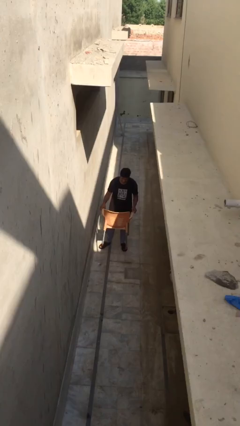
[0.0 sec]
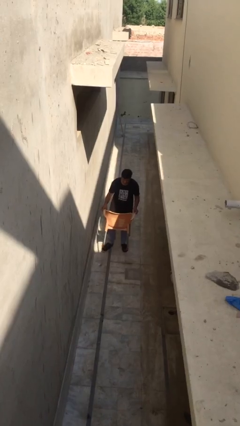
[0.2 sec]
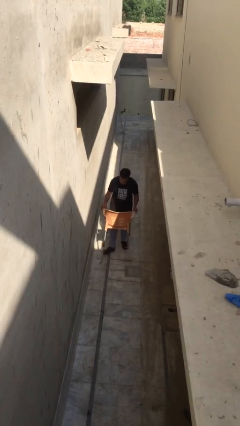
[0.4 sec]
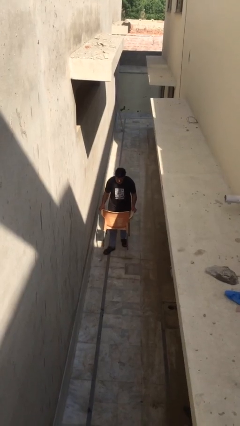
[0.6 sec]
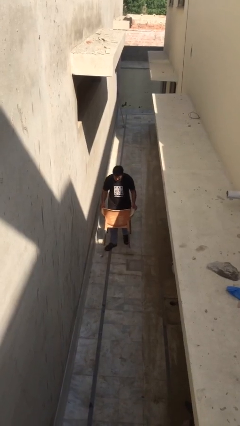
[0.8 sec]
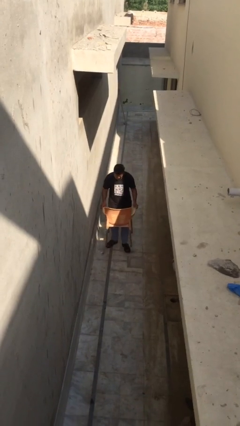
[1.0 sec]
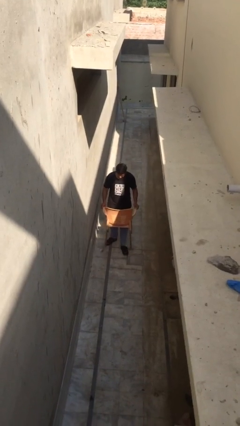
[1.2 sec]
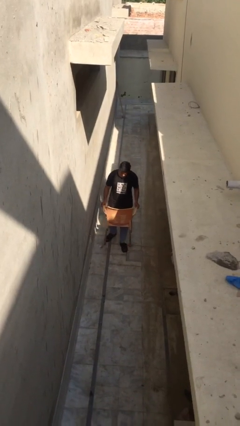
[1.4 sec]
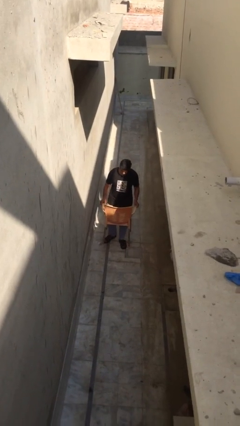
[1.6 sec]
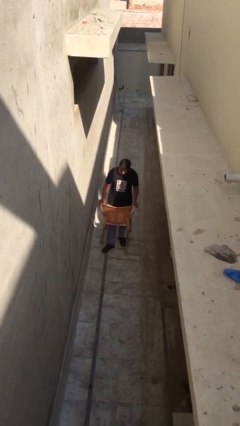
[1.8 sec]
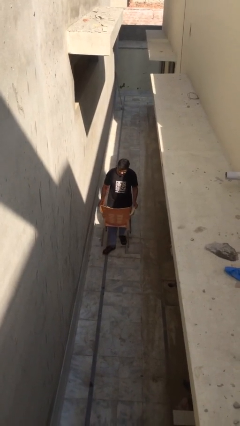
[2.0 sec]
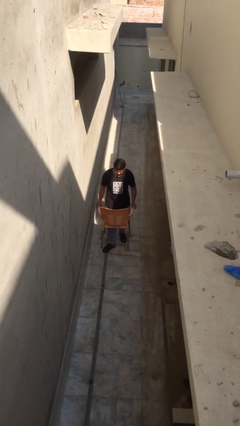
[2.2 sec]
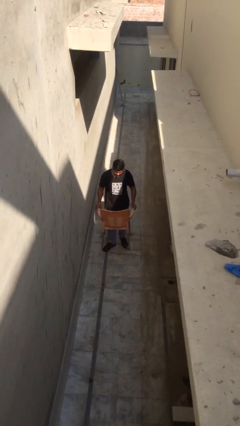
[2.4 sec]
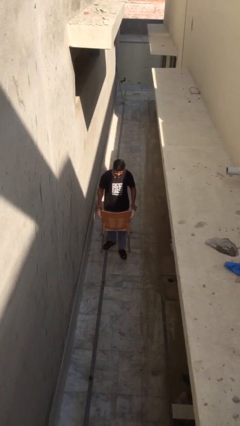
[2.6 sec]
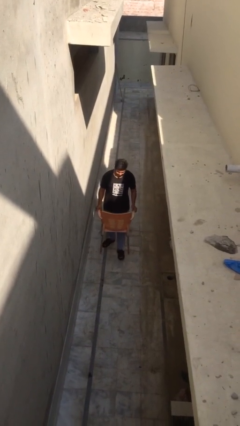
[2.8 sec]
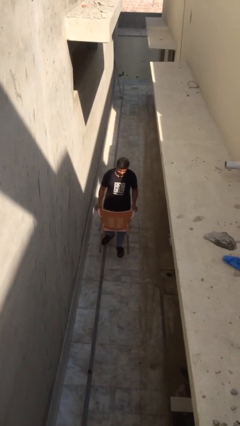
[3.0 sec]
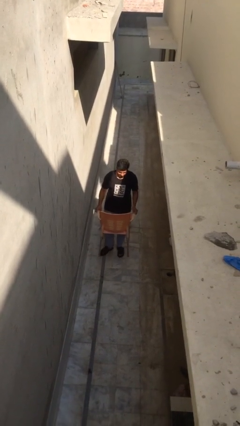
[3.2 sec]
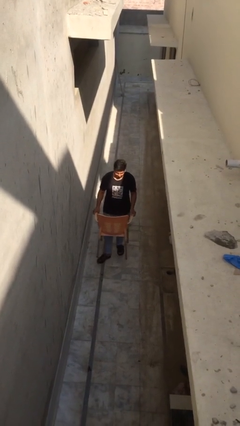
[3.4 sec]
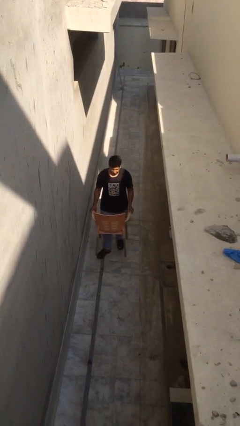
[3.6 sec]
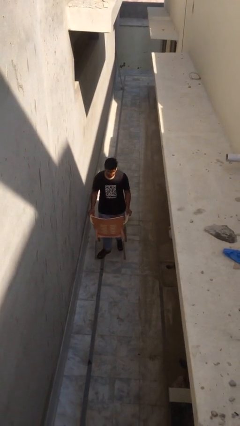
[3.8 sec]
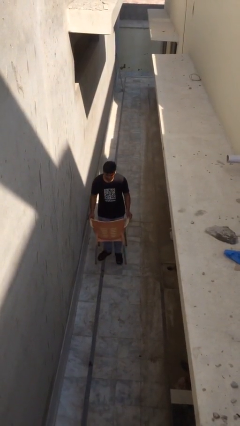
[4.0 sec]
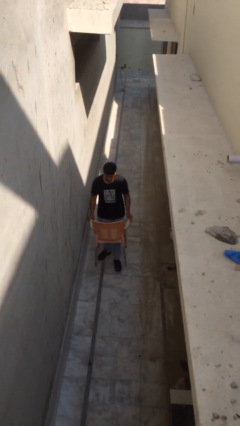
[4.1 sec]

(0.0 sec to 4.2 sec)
person carries heavy object

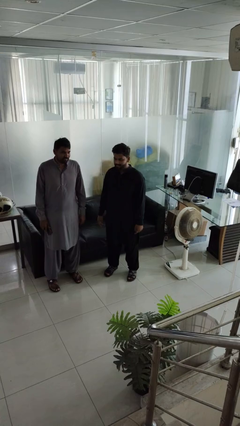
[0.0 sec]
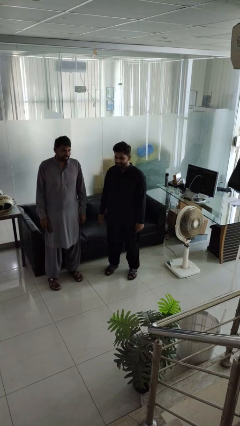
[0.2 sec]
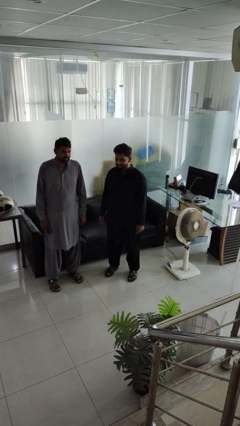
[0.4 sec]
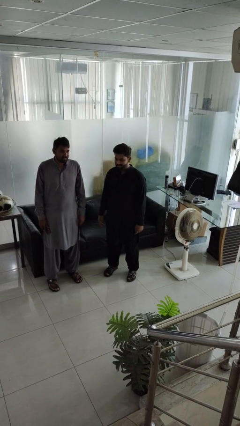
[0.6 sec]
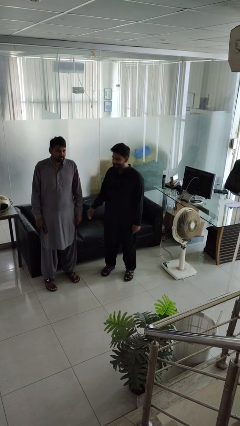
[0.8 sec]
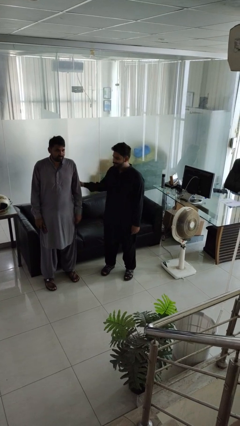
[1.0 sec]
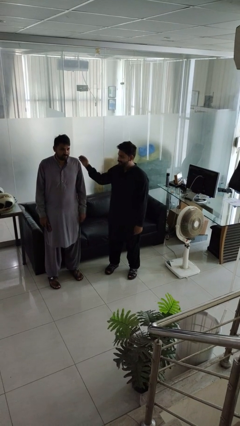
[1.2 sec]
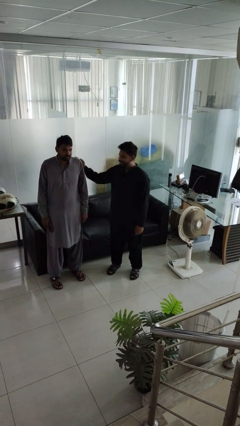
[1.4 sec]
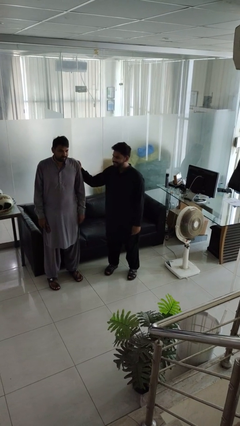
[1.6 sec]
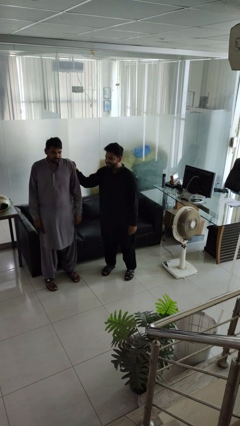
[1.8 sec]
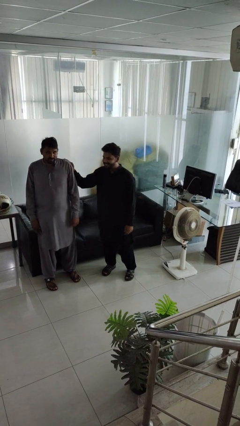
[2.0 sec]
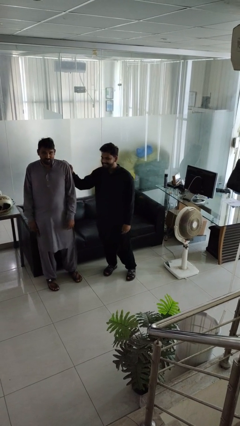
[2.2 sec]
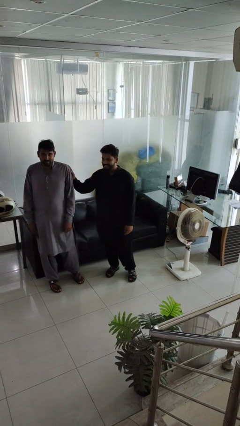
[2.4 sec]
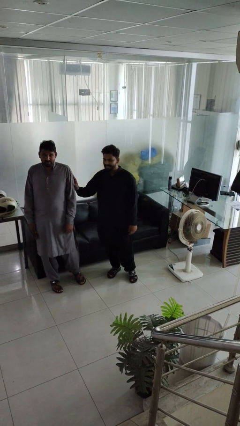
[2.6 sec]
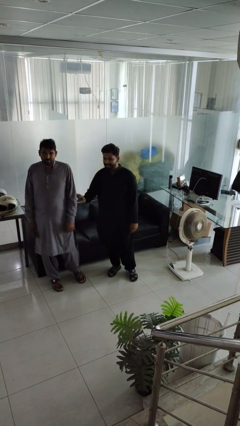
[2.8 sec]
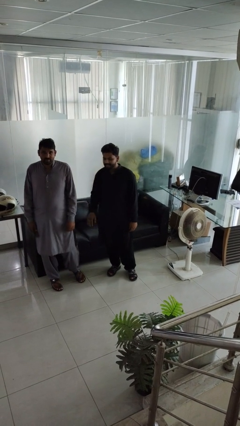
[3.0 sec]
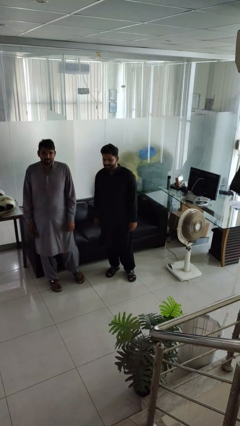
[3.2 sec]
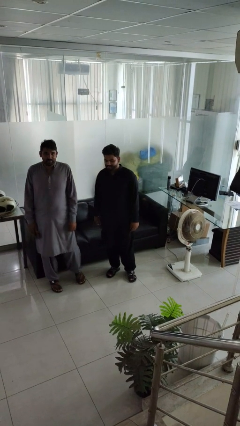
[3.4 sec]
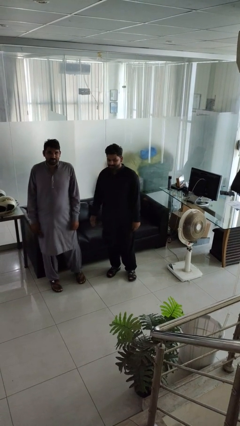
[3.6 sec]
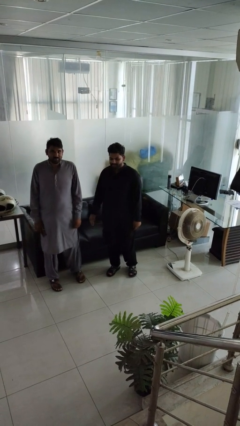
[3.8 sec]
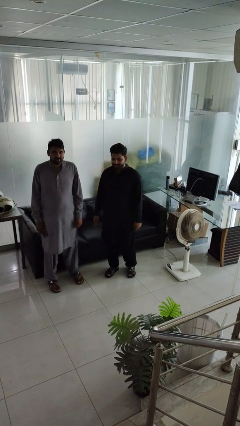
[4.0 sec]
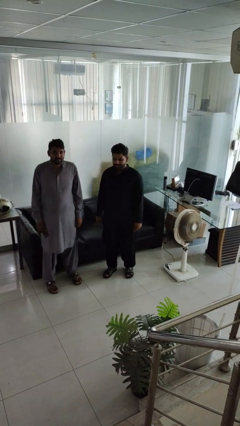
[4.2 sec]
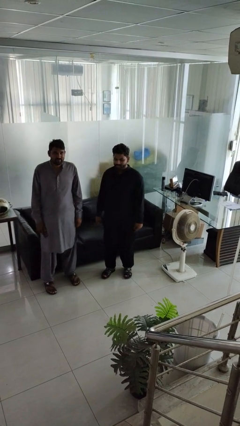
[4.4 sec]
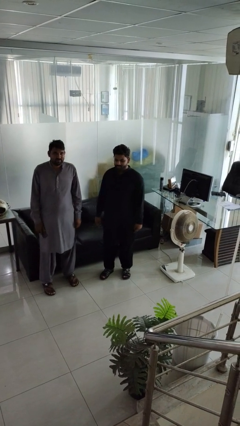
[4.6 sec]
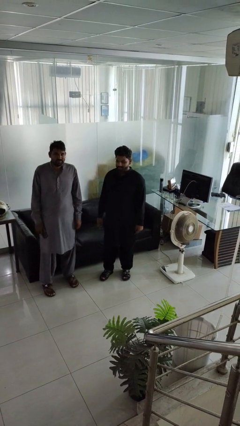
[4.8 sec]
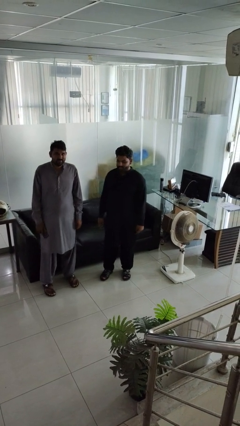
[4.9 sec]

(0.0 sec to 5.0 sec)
person shoves person

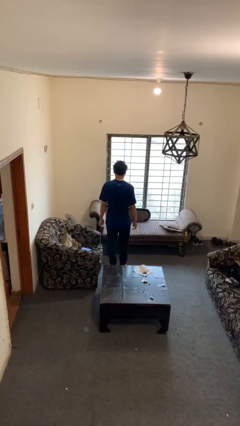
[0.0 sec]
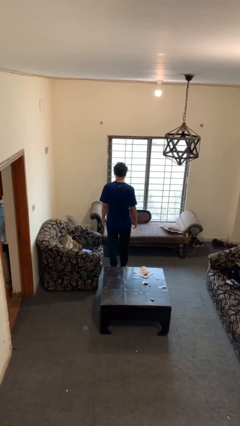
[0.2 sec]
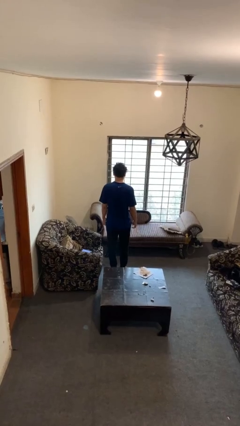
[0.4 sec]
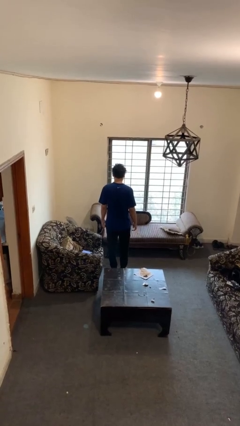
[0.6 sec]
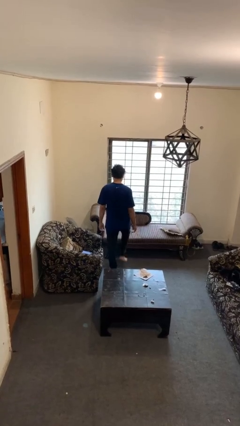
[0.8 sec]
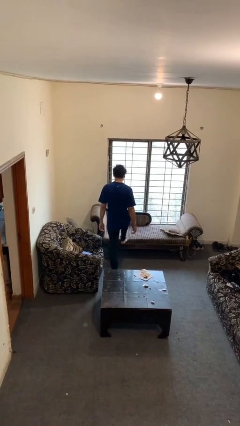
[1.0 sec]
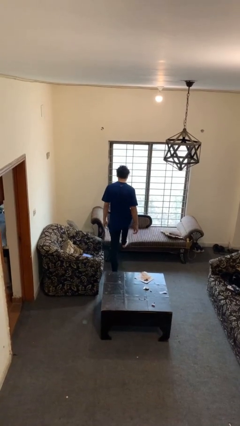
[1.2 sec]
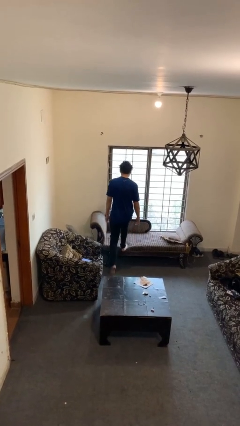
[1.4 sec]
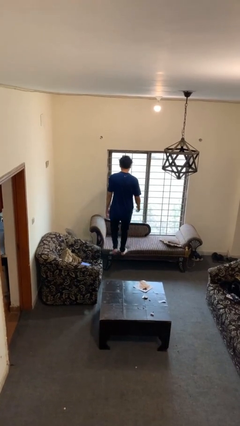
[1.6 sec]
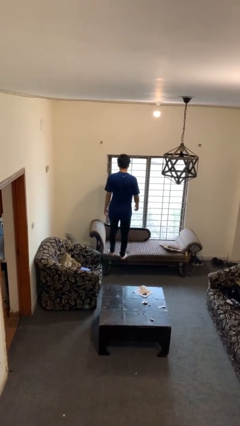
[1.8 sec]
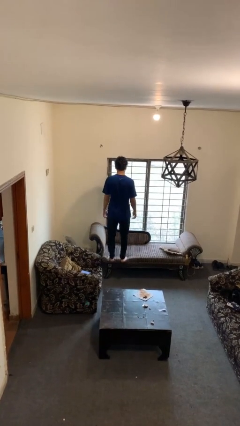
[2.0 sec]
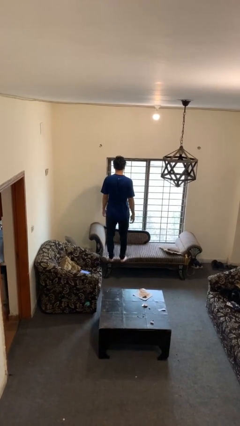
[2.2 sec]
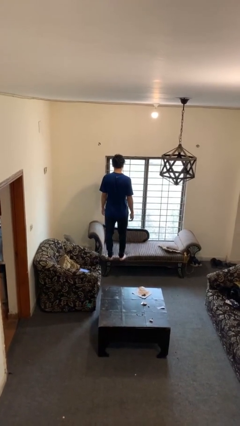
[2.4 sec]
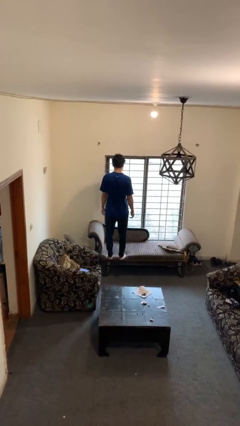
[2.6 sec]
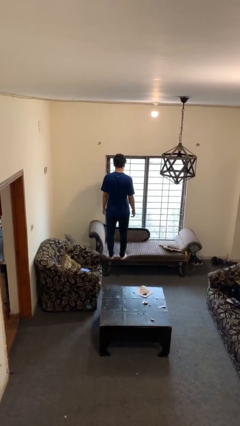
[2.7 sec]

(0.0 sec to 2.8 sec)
person climbs on couch

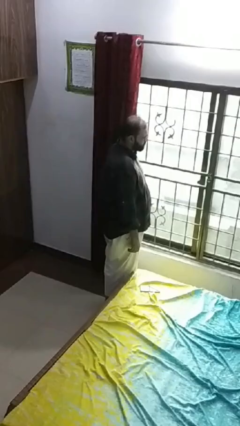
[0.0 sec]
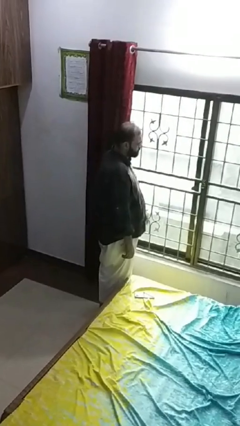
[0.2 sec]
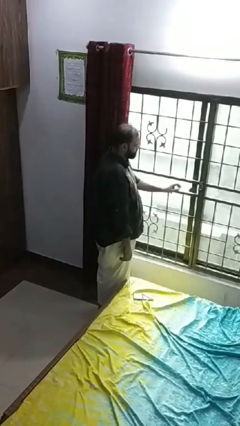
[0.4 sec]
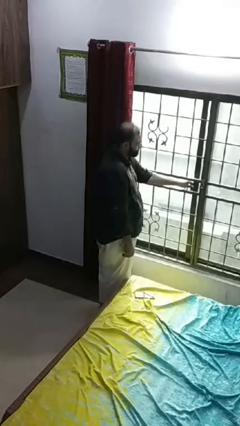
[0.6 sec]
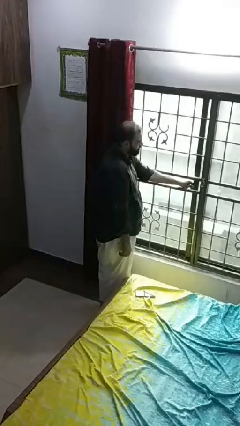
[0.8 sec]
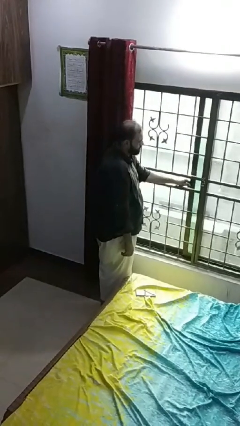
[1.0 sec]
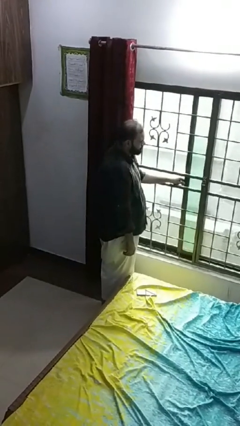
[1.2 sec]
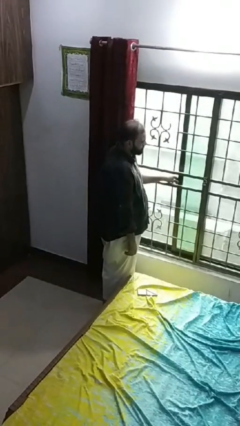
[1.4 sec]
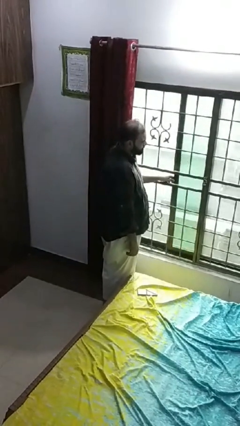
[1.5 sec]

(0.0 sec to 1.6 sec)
person opens home window

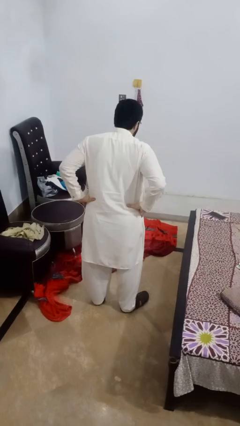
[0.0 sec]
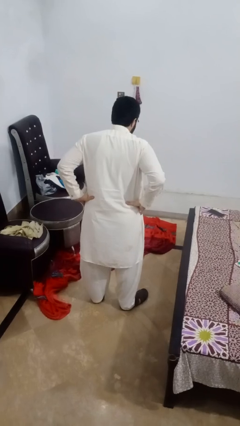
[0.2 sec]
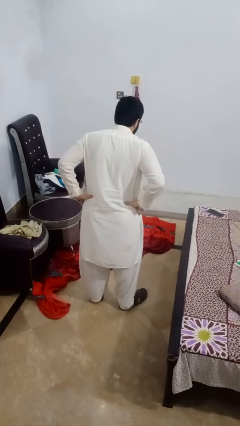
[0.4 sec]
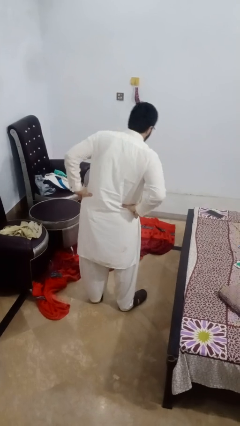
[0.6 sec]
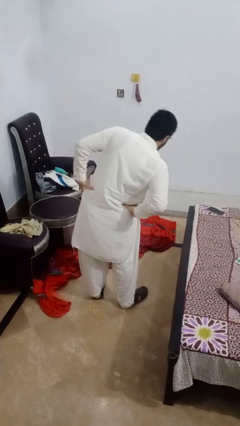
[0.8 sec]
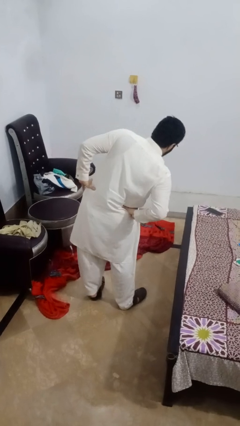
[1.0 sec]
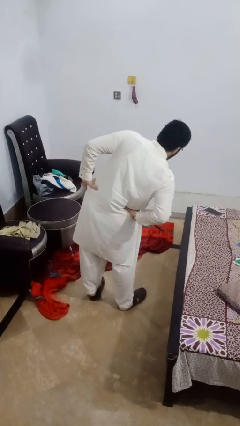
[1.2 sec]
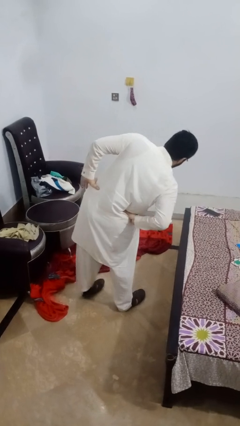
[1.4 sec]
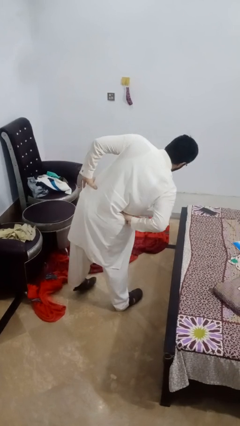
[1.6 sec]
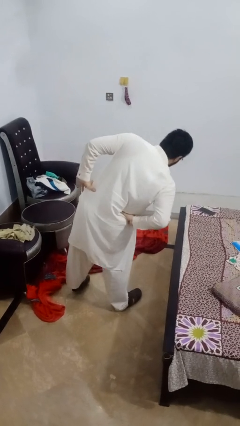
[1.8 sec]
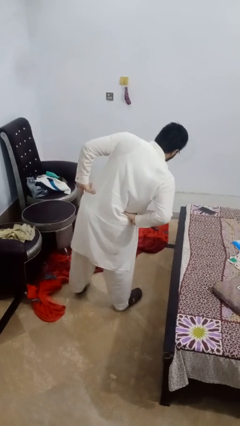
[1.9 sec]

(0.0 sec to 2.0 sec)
person stretches arms to side

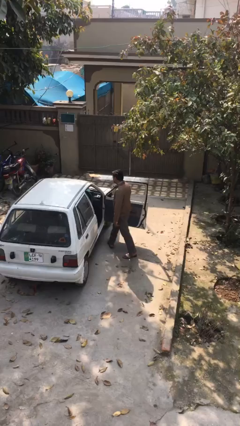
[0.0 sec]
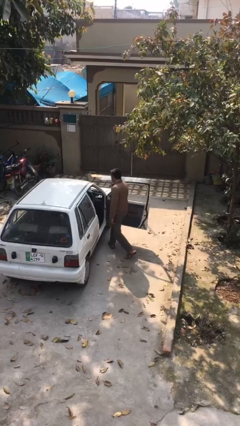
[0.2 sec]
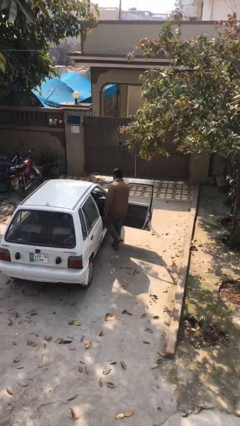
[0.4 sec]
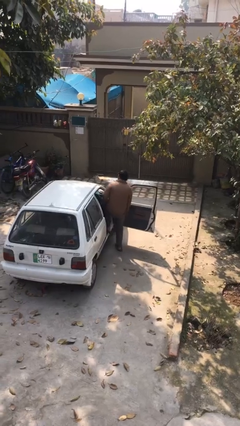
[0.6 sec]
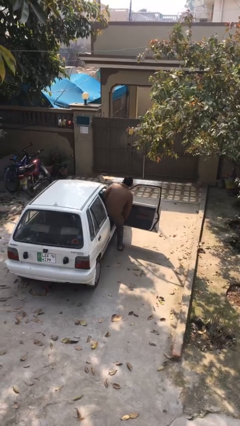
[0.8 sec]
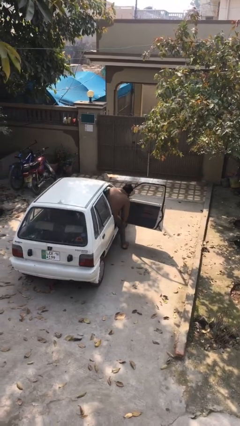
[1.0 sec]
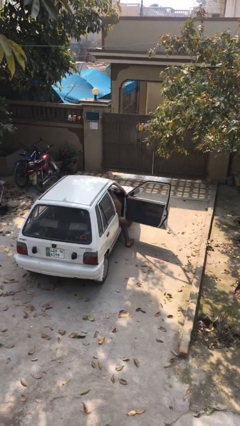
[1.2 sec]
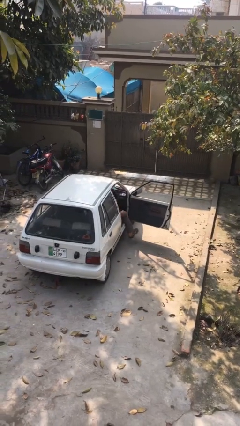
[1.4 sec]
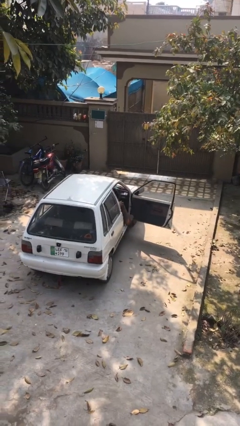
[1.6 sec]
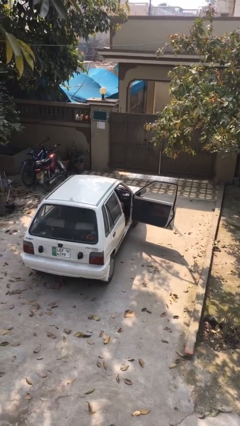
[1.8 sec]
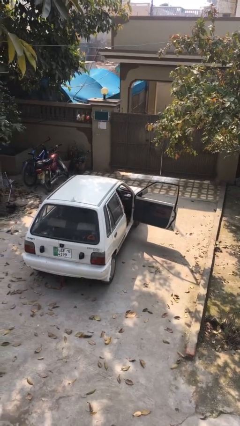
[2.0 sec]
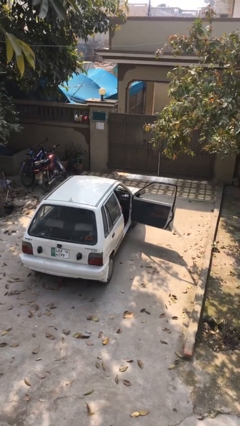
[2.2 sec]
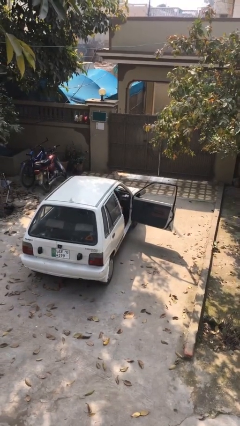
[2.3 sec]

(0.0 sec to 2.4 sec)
person enters car
